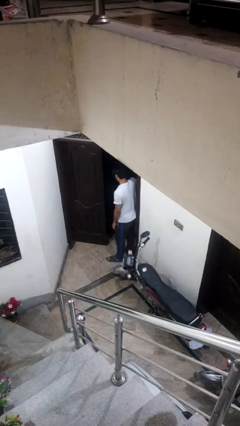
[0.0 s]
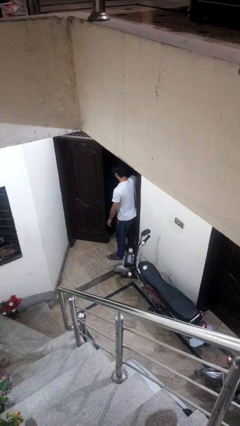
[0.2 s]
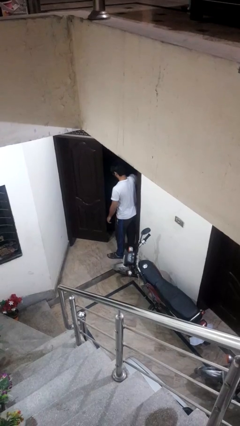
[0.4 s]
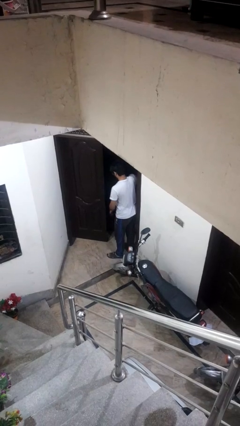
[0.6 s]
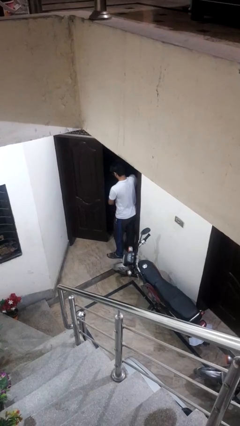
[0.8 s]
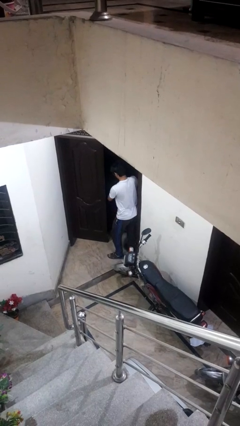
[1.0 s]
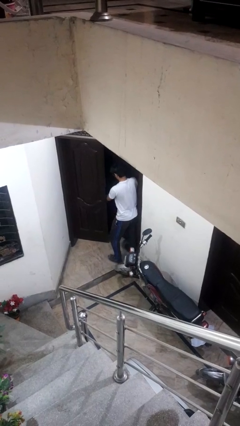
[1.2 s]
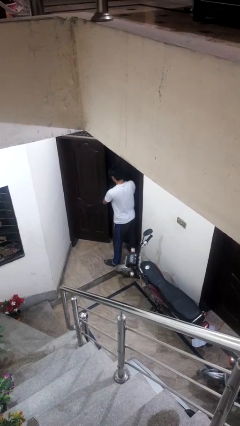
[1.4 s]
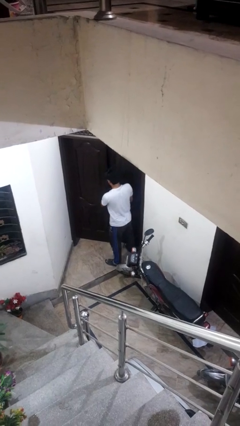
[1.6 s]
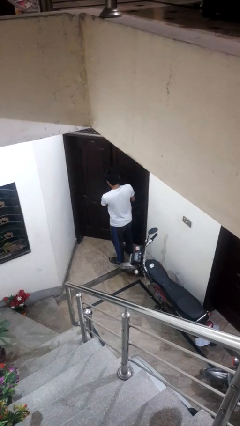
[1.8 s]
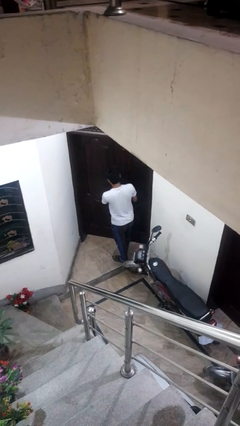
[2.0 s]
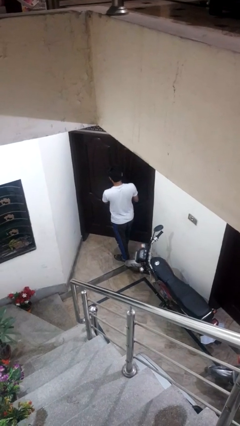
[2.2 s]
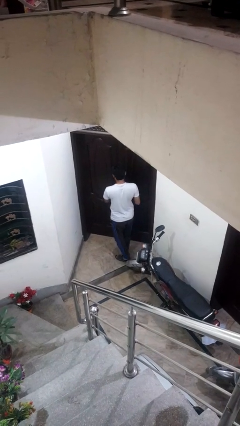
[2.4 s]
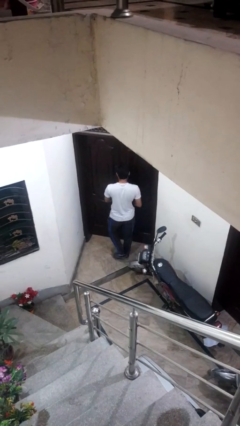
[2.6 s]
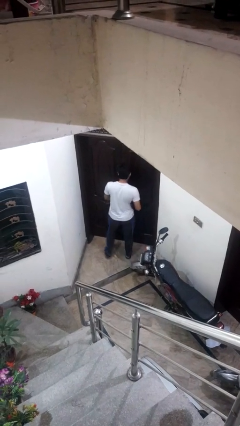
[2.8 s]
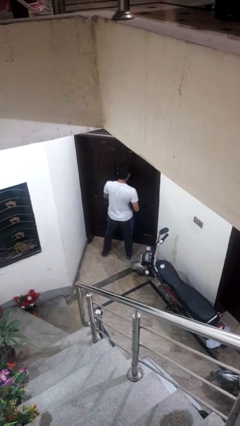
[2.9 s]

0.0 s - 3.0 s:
person closes facility door

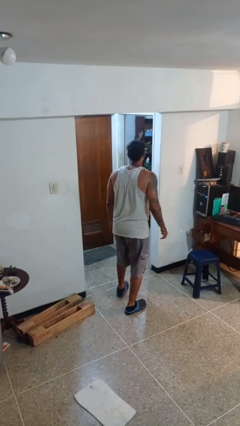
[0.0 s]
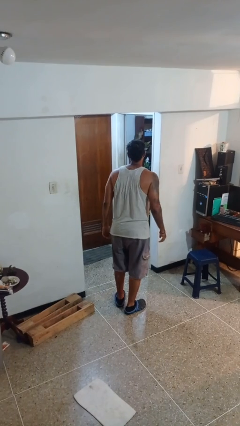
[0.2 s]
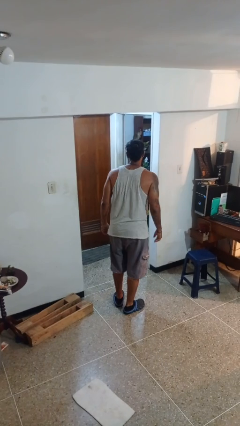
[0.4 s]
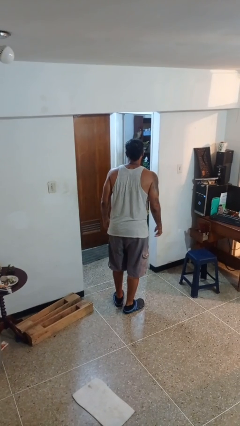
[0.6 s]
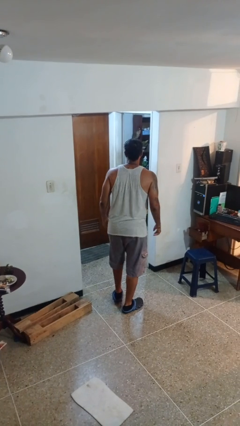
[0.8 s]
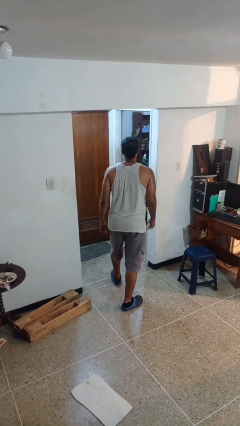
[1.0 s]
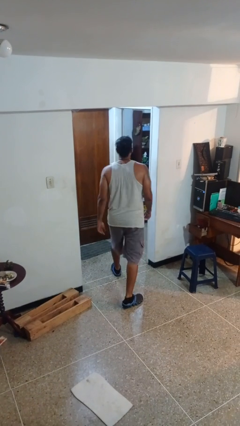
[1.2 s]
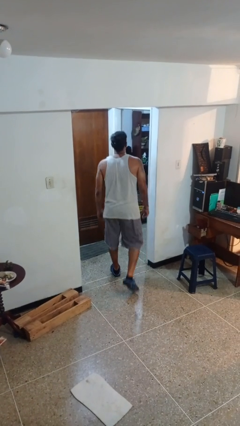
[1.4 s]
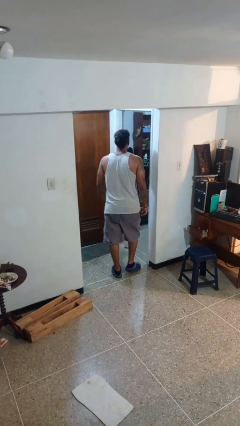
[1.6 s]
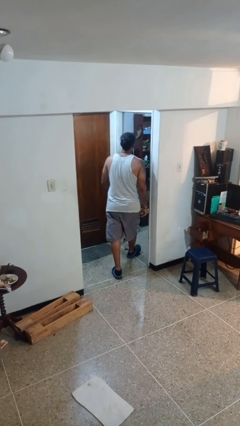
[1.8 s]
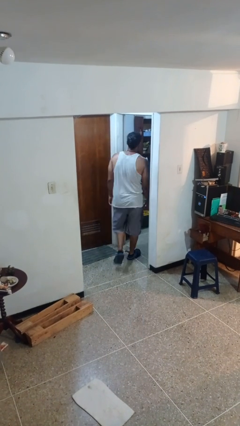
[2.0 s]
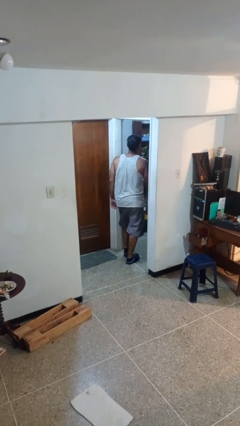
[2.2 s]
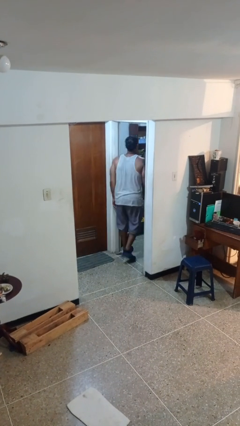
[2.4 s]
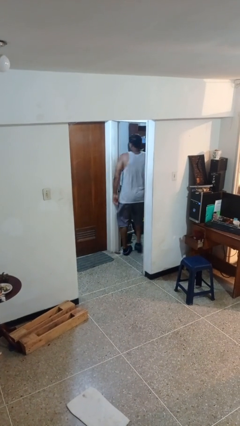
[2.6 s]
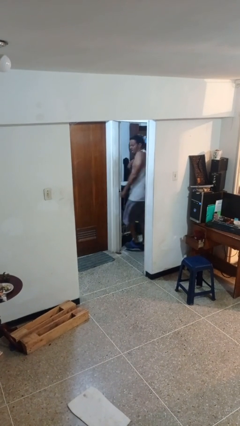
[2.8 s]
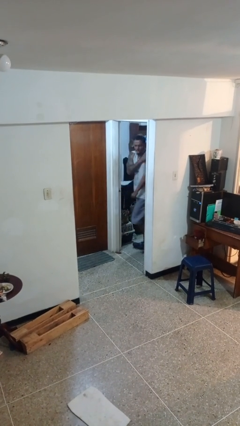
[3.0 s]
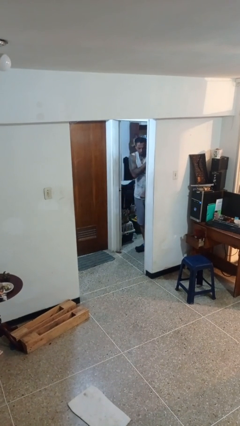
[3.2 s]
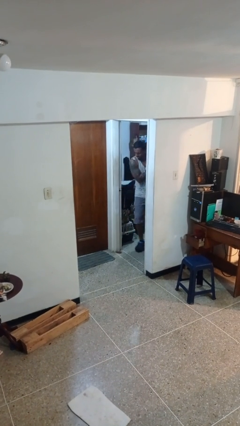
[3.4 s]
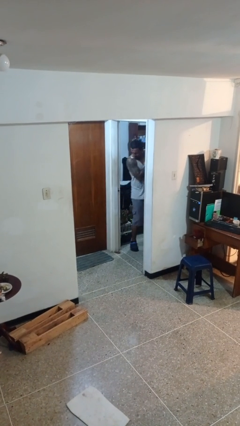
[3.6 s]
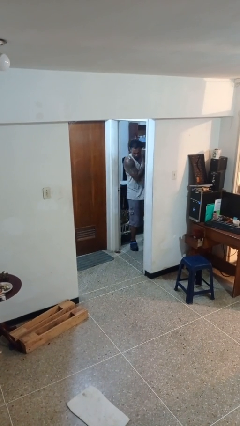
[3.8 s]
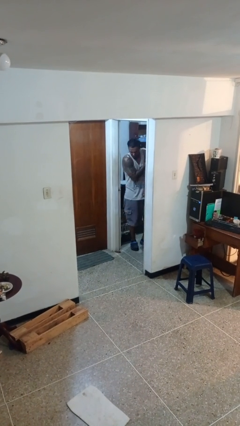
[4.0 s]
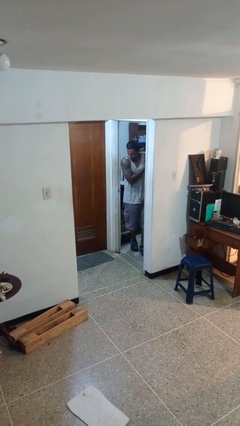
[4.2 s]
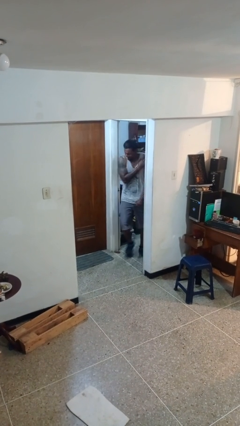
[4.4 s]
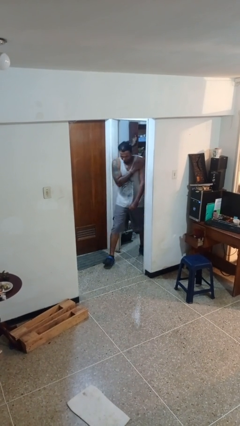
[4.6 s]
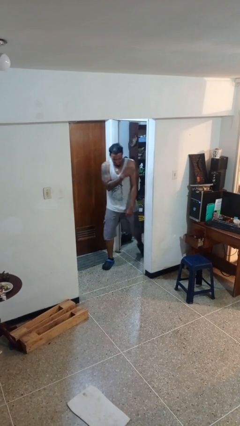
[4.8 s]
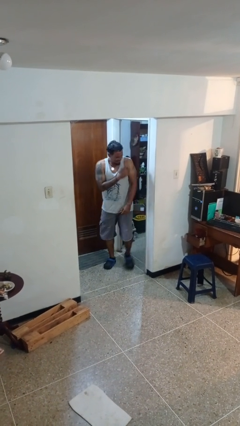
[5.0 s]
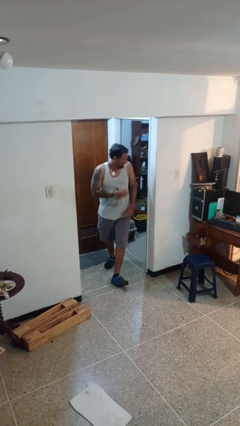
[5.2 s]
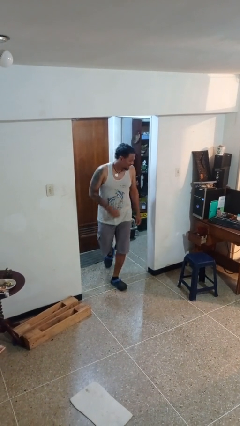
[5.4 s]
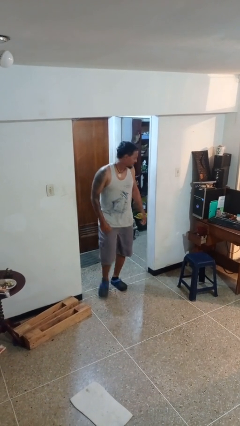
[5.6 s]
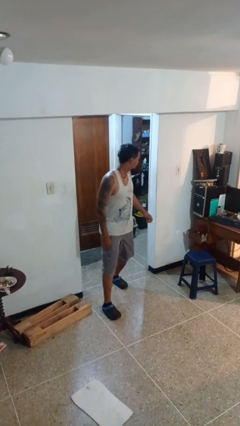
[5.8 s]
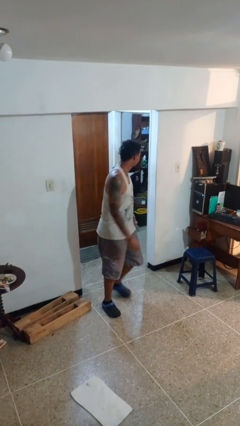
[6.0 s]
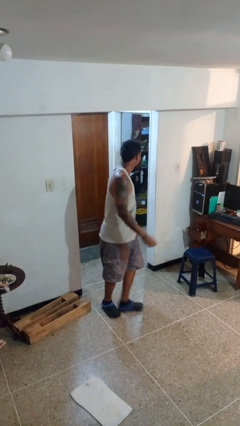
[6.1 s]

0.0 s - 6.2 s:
person bumps into wall

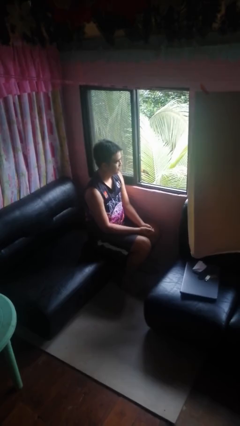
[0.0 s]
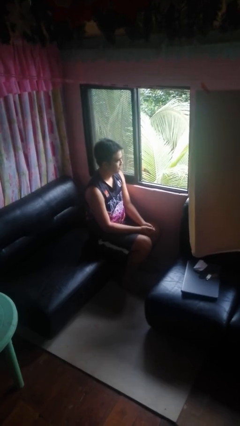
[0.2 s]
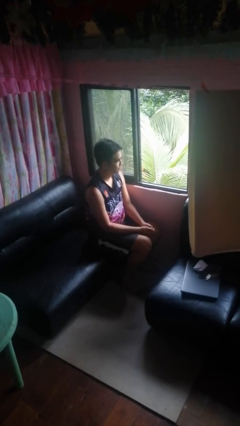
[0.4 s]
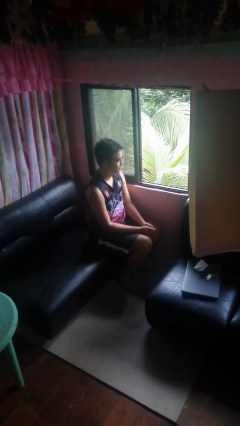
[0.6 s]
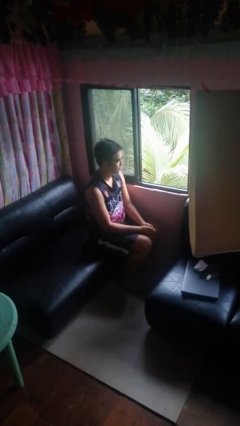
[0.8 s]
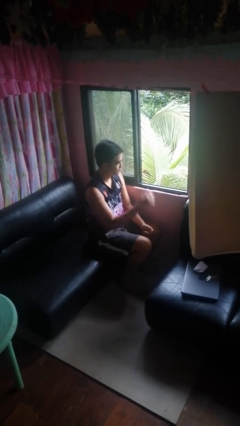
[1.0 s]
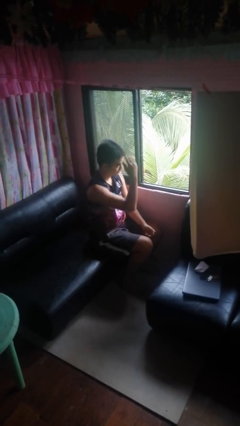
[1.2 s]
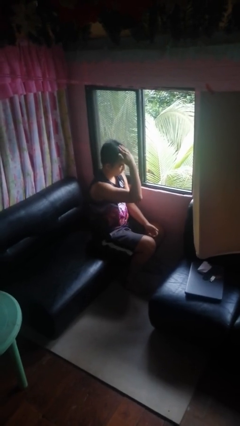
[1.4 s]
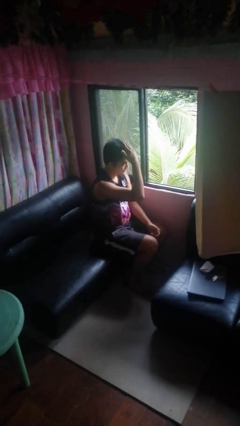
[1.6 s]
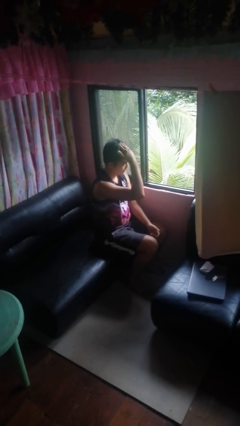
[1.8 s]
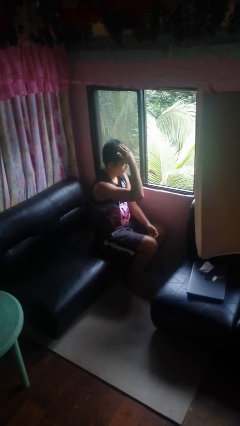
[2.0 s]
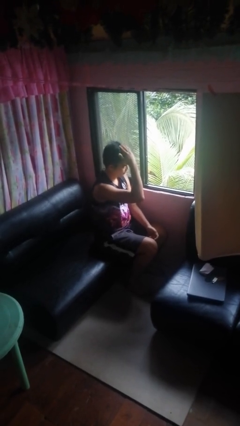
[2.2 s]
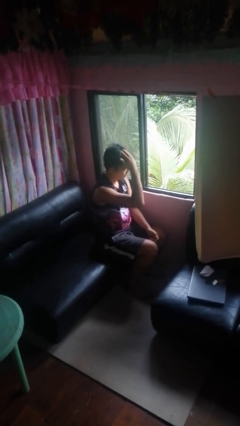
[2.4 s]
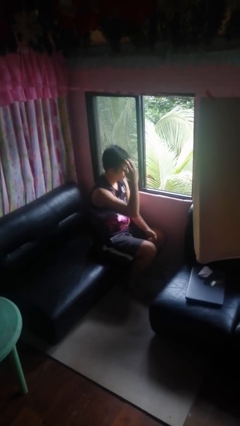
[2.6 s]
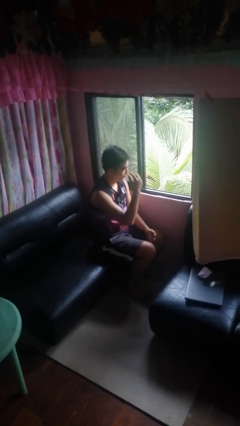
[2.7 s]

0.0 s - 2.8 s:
person pats head

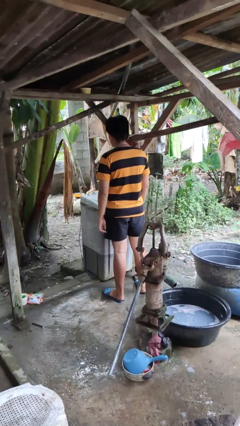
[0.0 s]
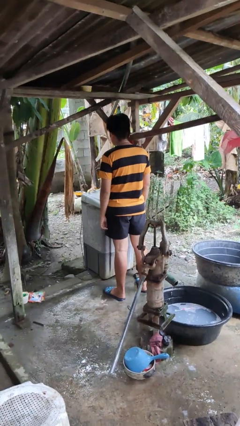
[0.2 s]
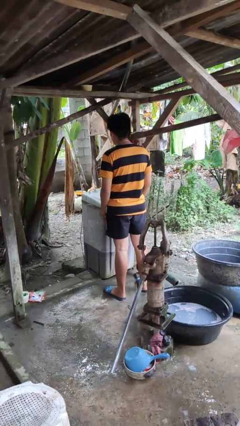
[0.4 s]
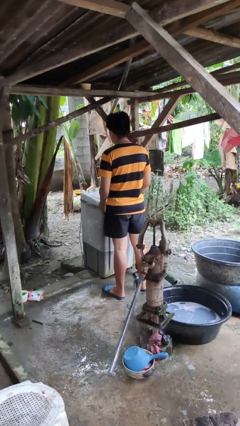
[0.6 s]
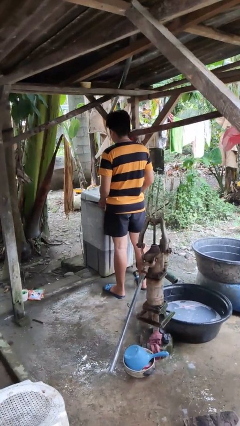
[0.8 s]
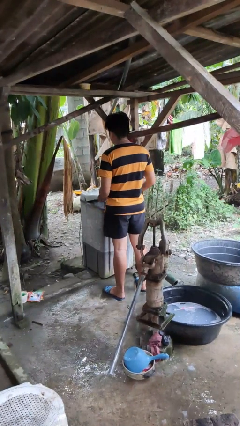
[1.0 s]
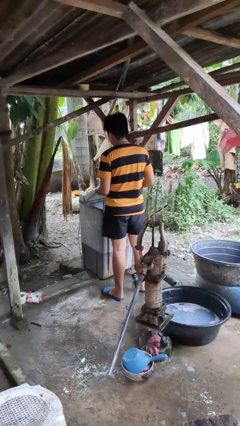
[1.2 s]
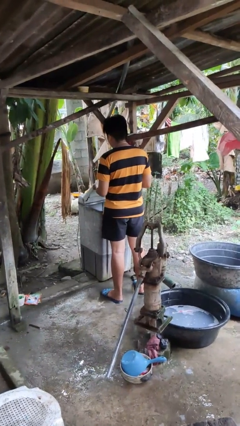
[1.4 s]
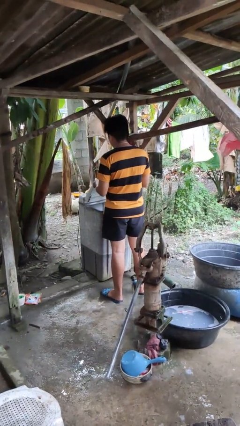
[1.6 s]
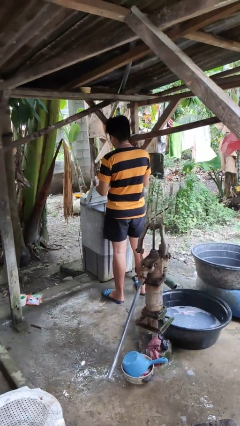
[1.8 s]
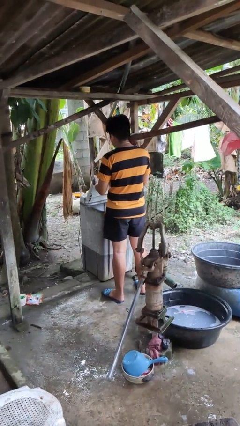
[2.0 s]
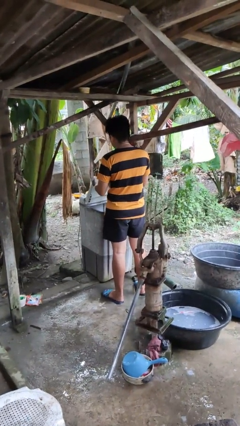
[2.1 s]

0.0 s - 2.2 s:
person opens clothes washer

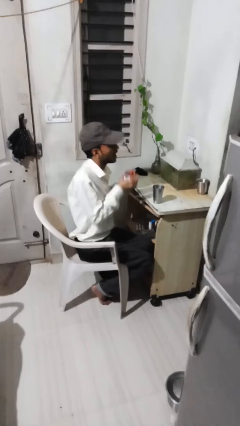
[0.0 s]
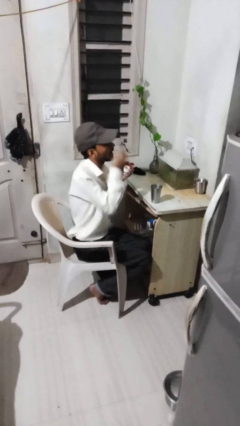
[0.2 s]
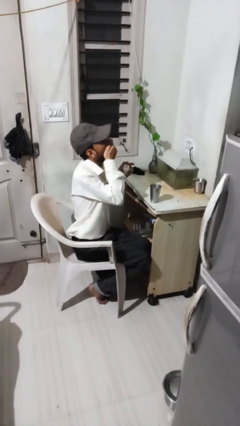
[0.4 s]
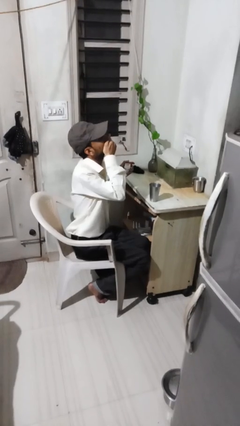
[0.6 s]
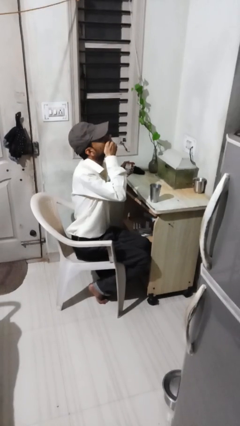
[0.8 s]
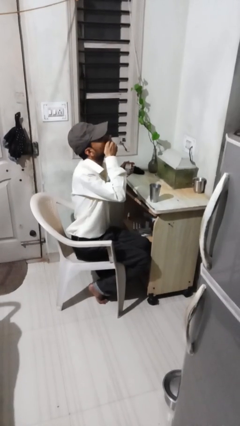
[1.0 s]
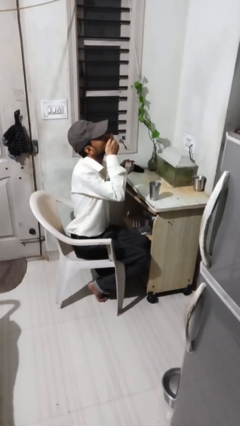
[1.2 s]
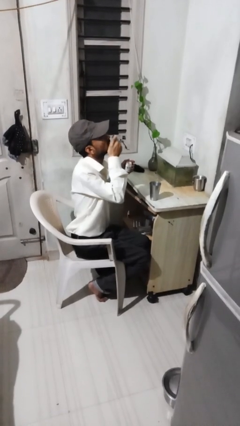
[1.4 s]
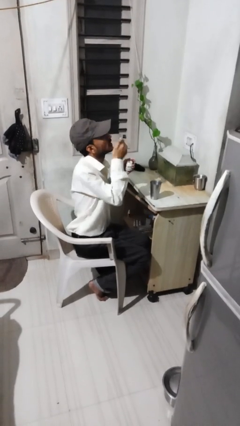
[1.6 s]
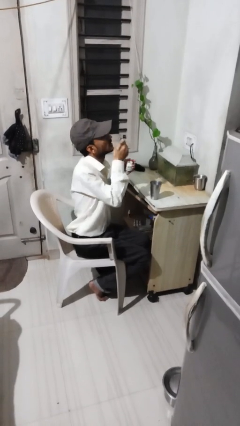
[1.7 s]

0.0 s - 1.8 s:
person takes medicine pills

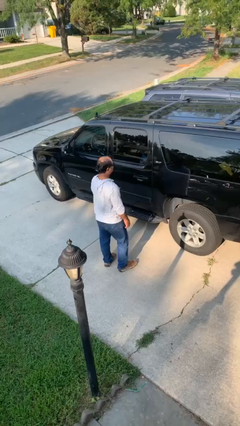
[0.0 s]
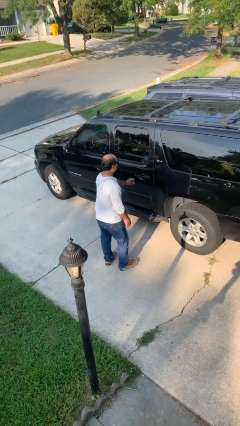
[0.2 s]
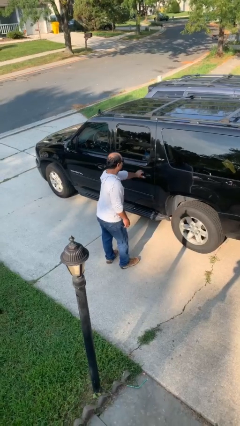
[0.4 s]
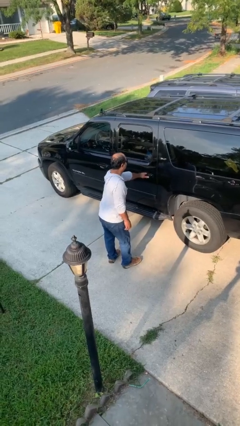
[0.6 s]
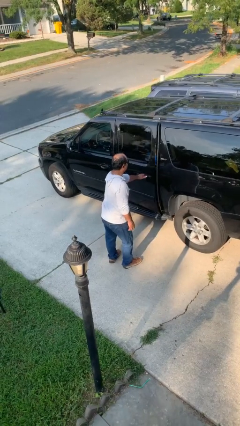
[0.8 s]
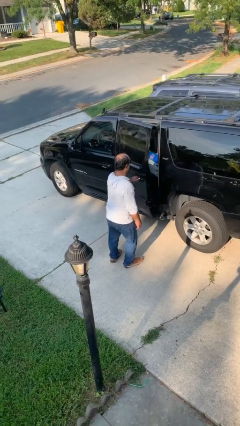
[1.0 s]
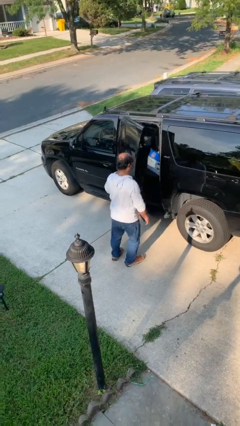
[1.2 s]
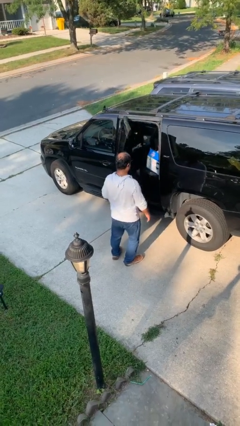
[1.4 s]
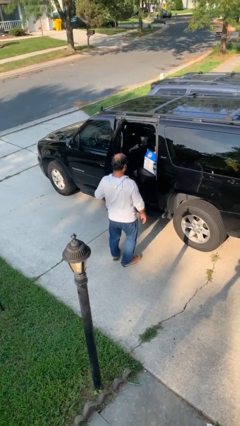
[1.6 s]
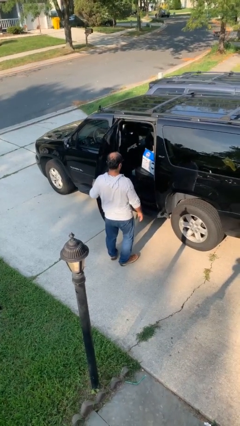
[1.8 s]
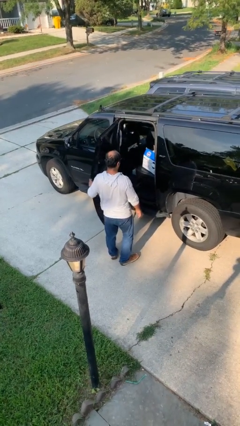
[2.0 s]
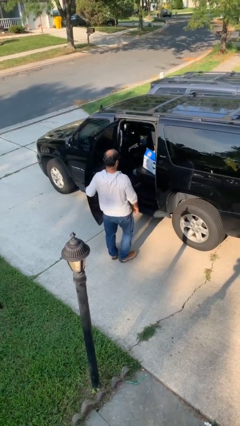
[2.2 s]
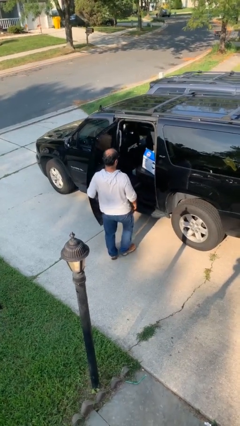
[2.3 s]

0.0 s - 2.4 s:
person opens car door
